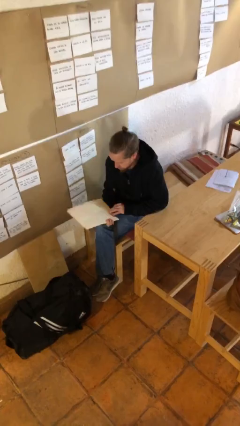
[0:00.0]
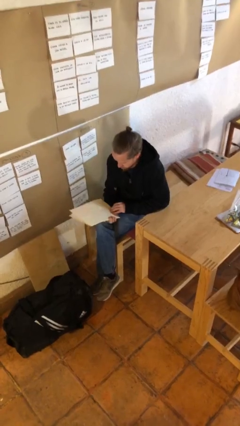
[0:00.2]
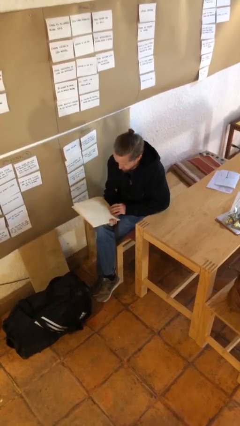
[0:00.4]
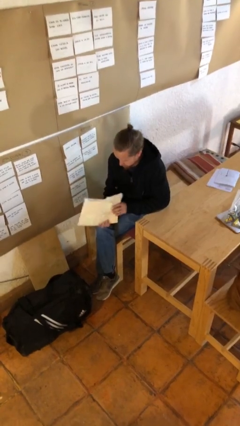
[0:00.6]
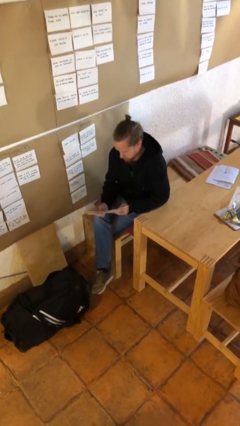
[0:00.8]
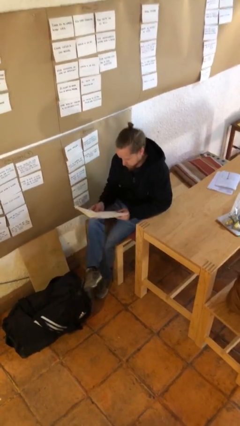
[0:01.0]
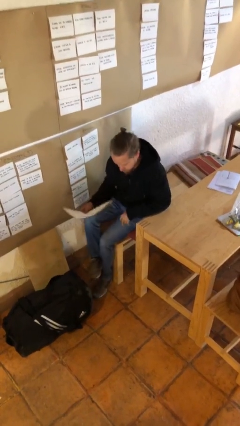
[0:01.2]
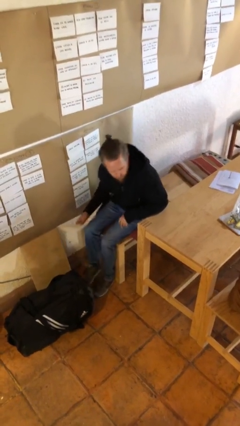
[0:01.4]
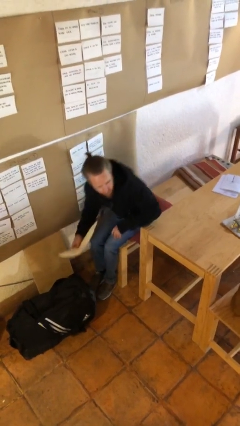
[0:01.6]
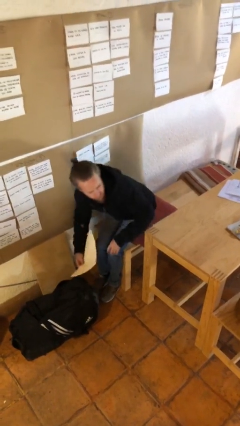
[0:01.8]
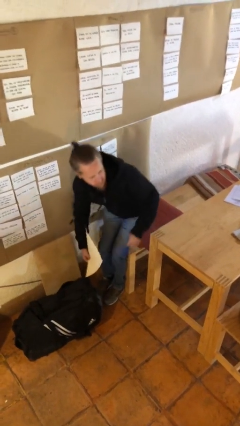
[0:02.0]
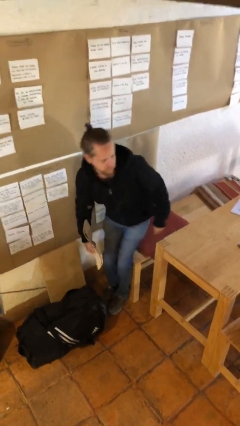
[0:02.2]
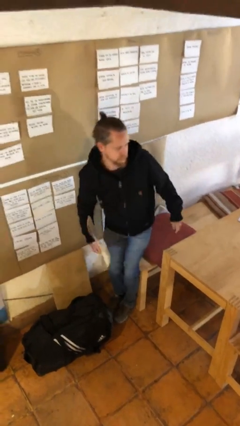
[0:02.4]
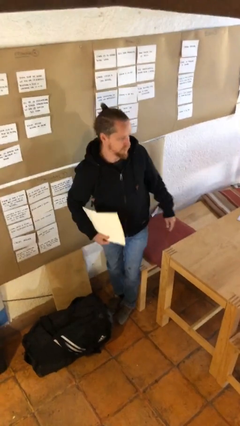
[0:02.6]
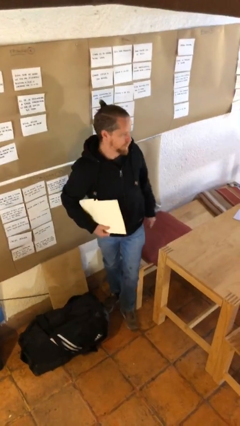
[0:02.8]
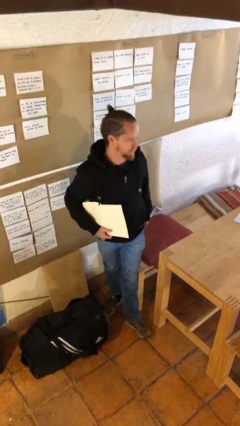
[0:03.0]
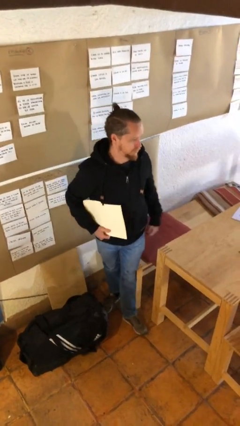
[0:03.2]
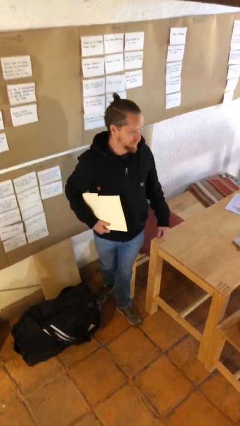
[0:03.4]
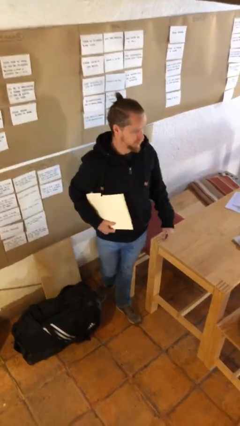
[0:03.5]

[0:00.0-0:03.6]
person stands up

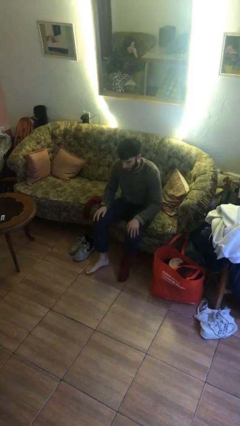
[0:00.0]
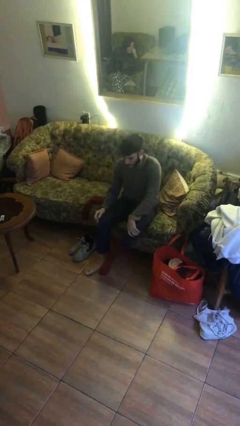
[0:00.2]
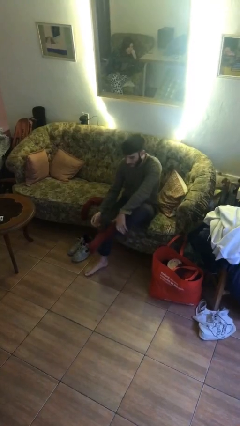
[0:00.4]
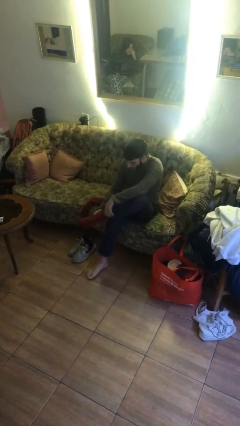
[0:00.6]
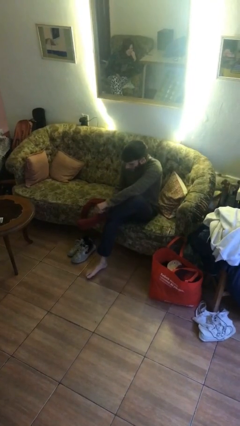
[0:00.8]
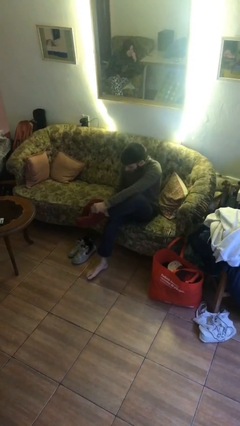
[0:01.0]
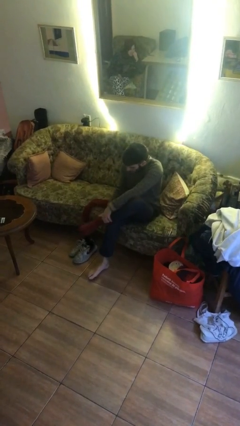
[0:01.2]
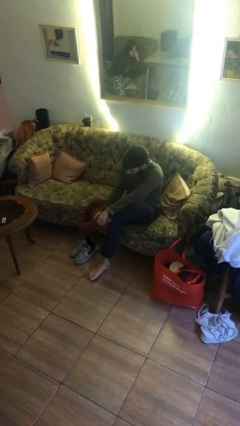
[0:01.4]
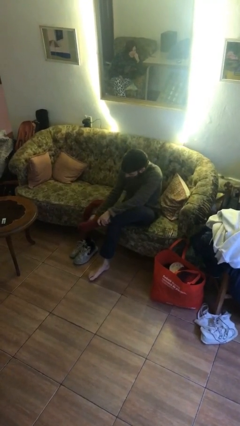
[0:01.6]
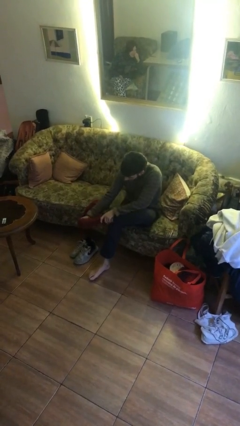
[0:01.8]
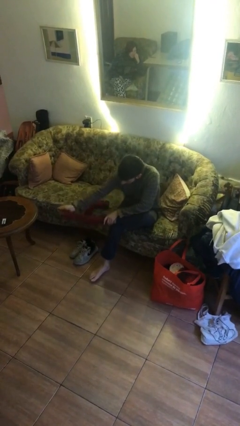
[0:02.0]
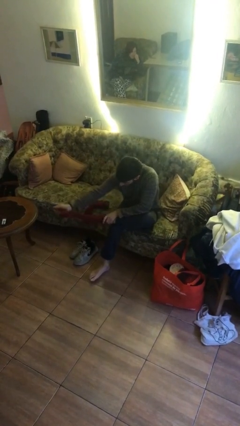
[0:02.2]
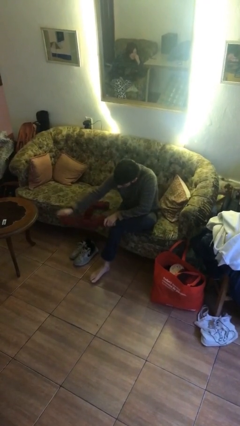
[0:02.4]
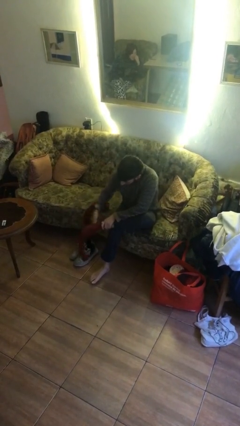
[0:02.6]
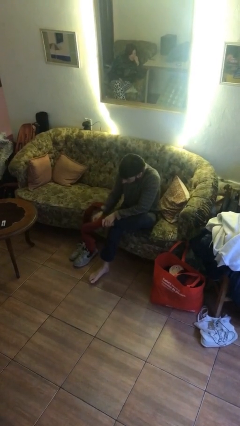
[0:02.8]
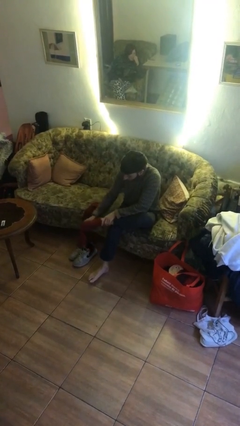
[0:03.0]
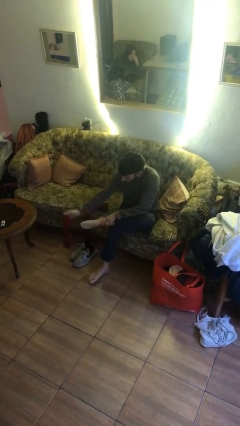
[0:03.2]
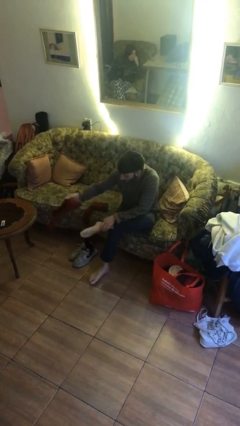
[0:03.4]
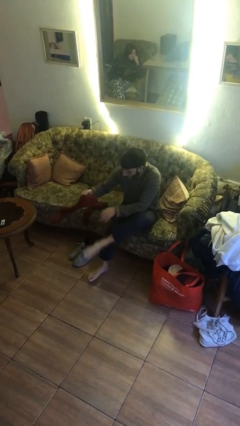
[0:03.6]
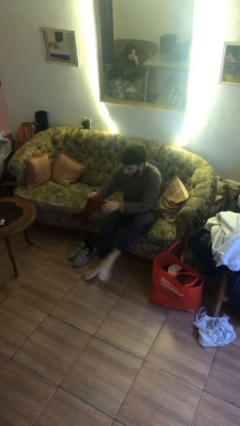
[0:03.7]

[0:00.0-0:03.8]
person takes off socks

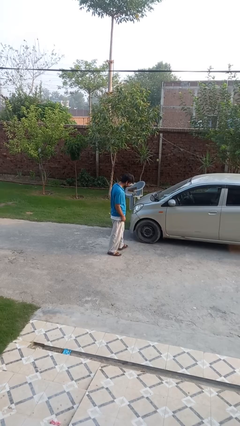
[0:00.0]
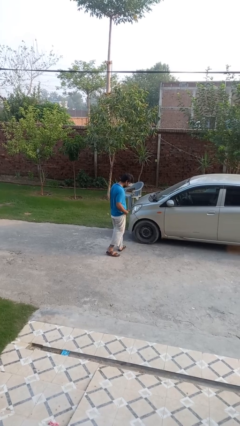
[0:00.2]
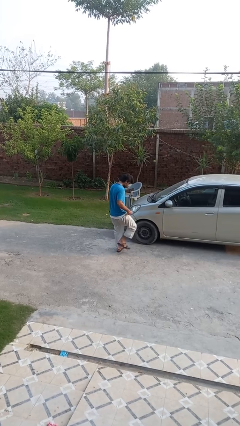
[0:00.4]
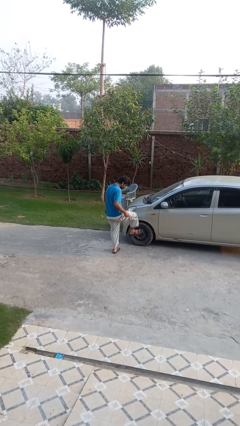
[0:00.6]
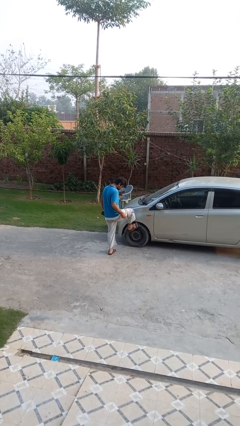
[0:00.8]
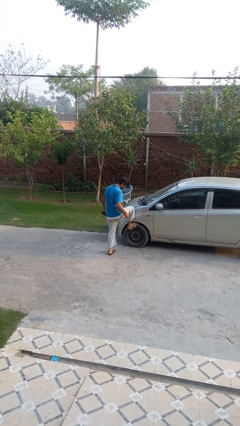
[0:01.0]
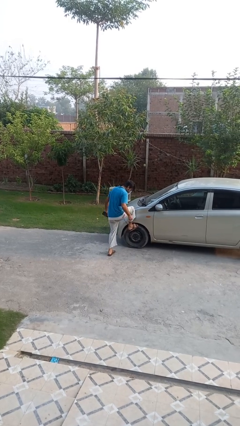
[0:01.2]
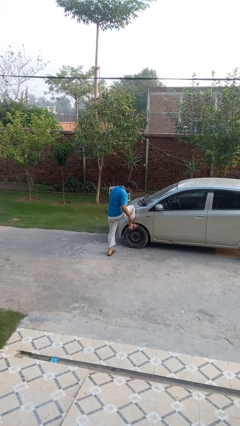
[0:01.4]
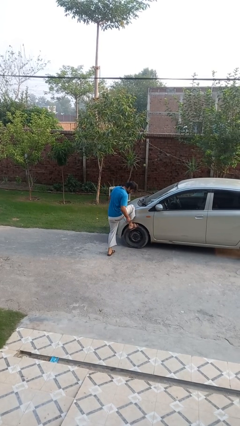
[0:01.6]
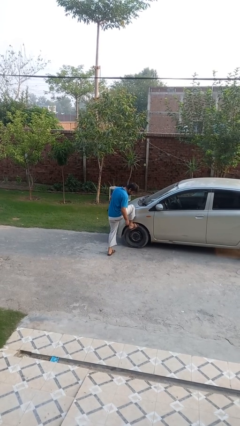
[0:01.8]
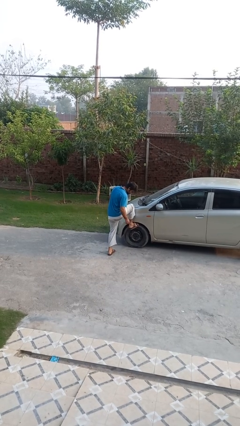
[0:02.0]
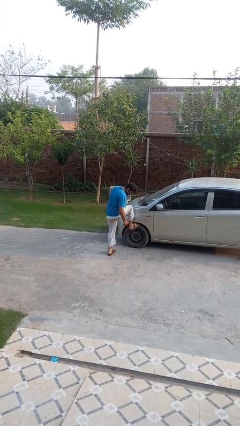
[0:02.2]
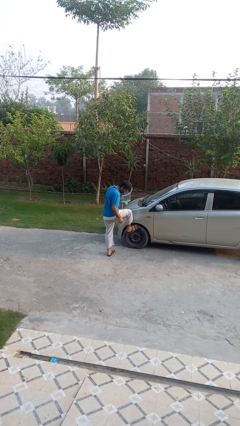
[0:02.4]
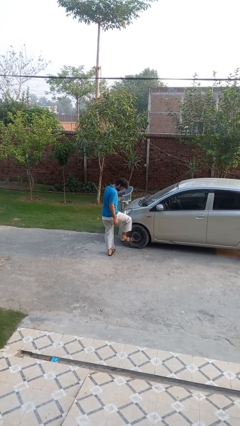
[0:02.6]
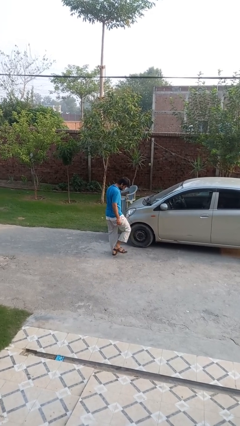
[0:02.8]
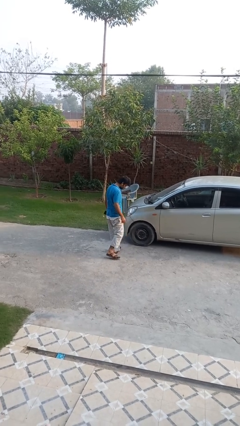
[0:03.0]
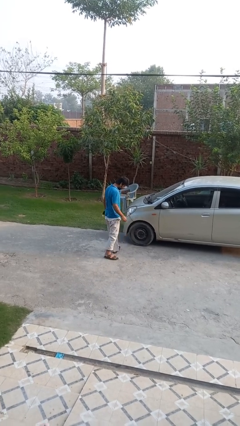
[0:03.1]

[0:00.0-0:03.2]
person kicks car tires

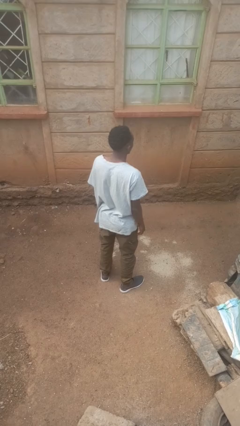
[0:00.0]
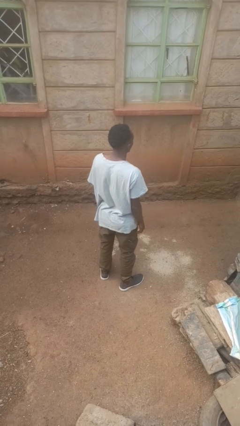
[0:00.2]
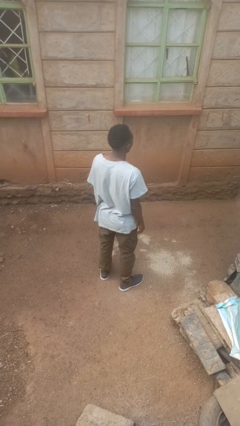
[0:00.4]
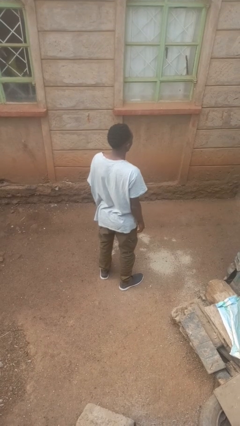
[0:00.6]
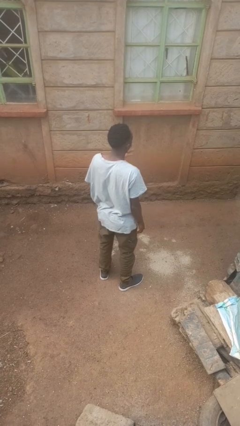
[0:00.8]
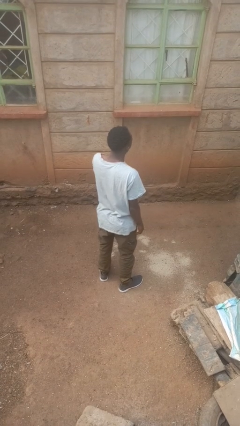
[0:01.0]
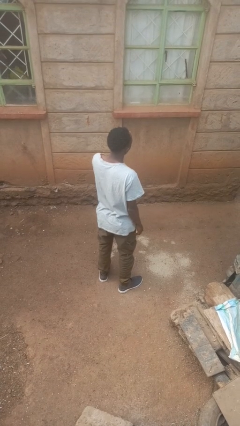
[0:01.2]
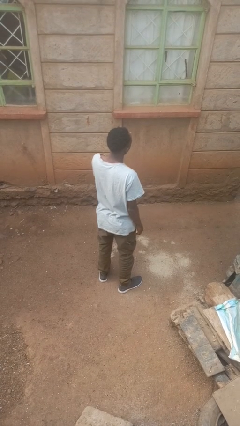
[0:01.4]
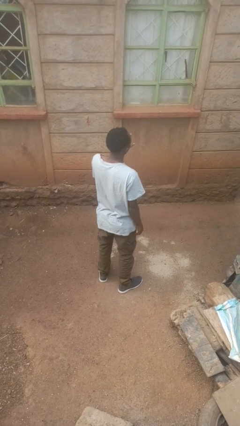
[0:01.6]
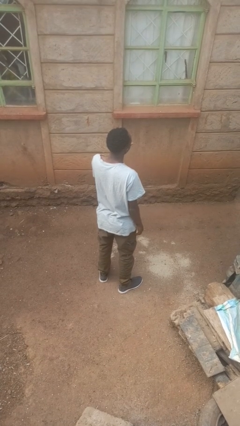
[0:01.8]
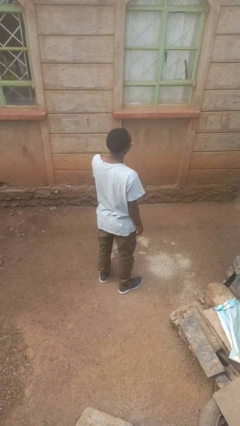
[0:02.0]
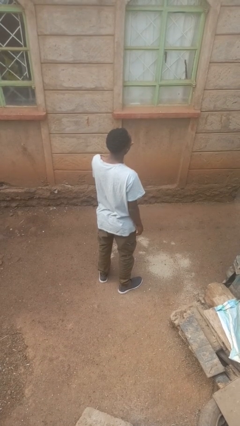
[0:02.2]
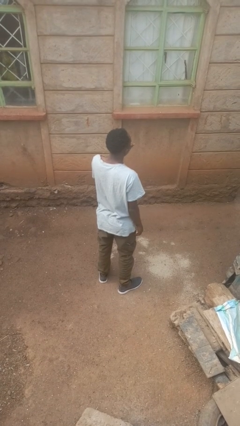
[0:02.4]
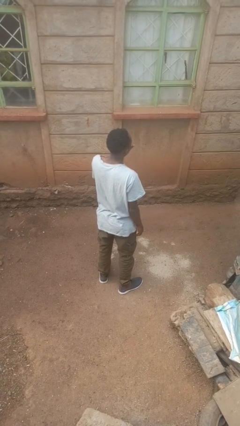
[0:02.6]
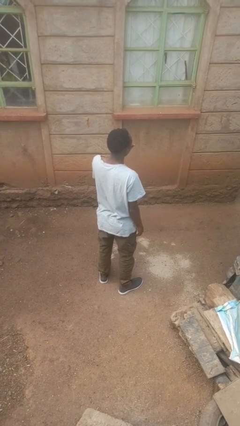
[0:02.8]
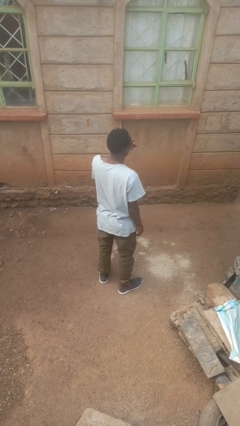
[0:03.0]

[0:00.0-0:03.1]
person licks fingers

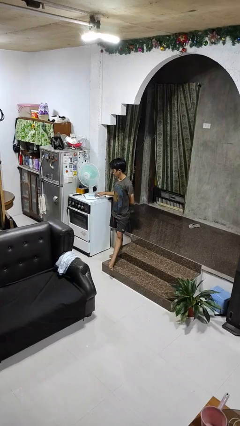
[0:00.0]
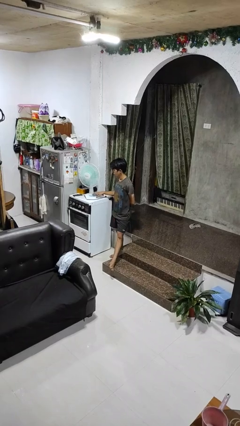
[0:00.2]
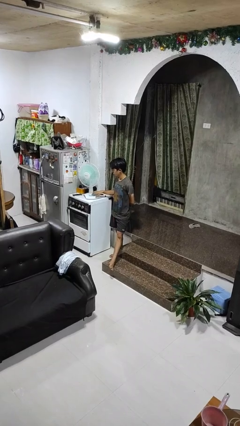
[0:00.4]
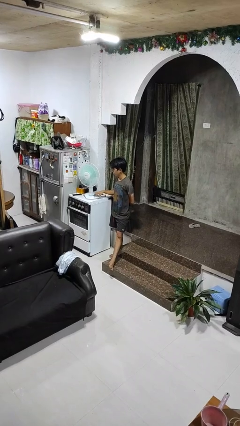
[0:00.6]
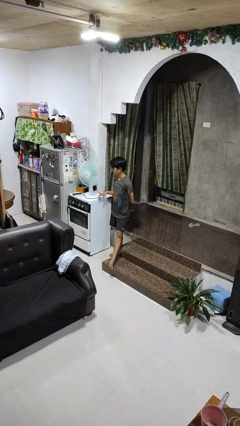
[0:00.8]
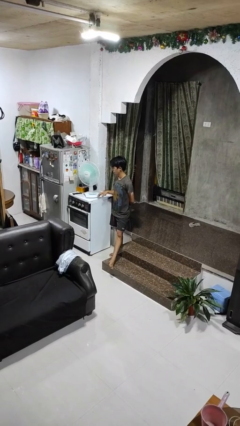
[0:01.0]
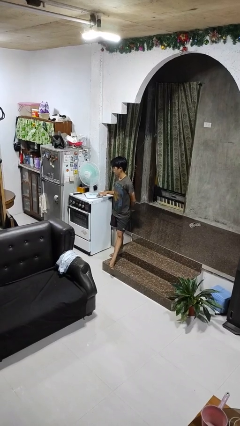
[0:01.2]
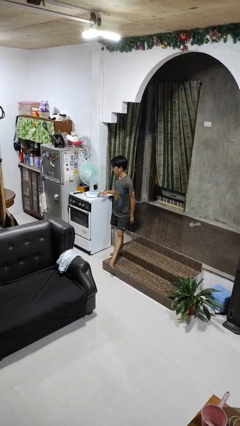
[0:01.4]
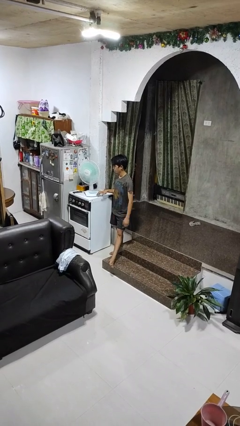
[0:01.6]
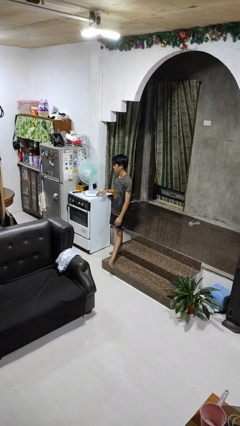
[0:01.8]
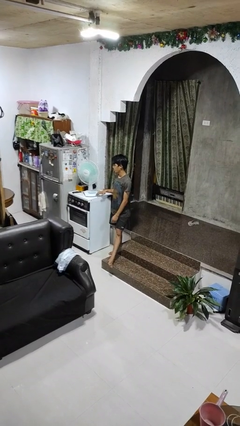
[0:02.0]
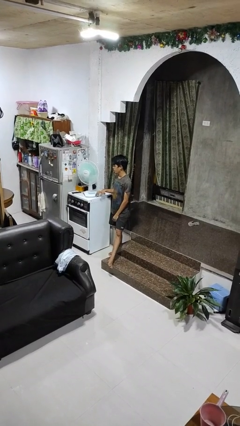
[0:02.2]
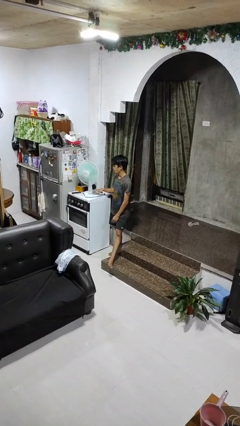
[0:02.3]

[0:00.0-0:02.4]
person turns on fan

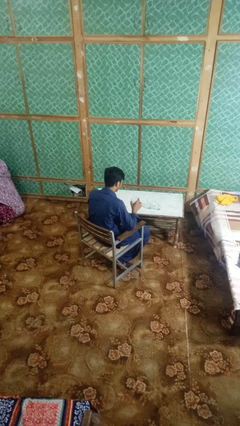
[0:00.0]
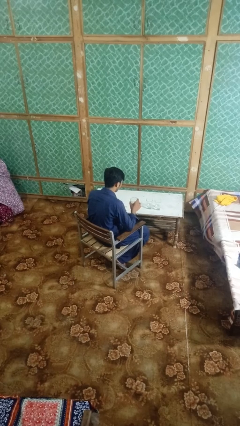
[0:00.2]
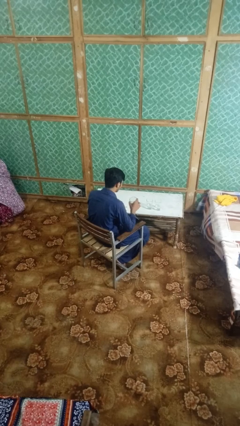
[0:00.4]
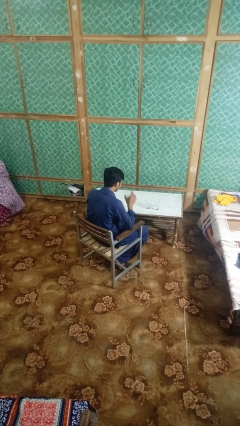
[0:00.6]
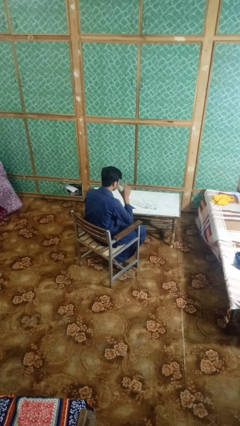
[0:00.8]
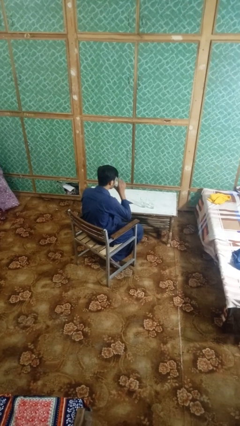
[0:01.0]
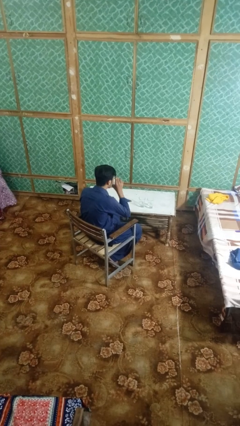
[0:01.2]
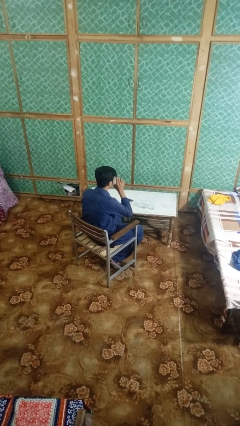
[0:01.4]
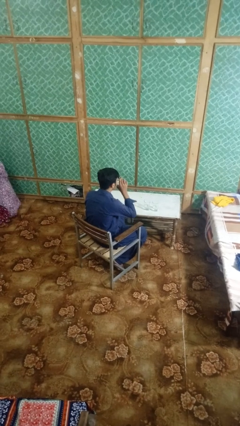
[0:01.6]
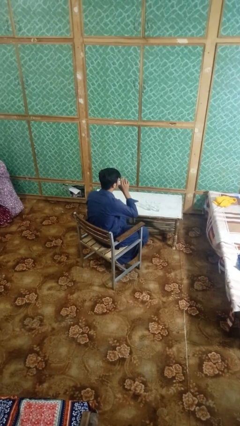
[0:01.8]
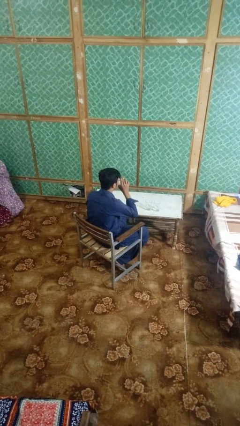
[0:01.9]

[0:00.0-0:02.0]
person drinks from shotglass
